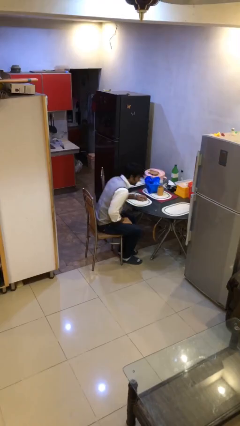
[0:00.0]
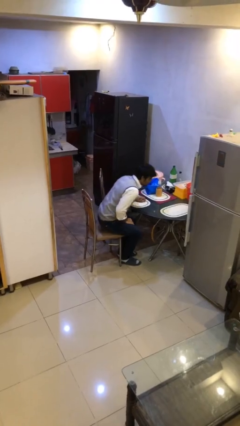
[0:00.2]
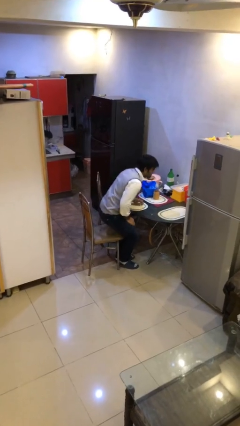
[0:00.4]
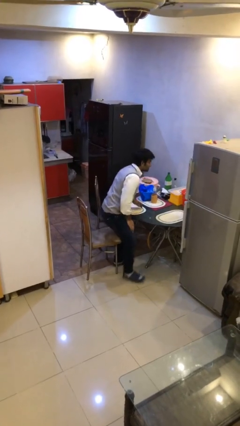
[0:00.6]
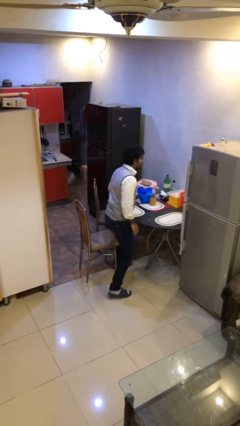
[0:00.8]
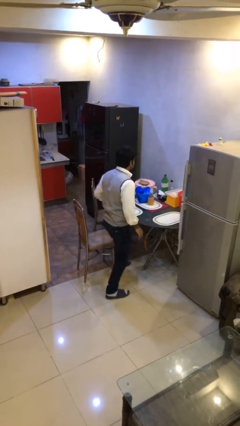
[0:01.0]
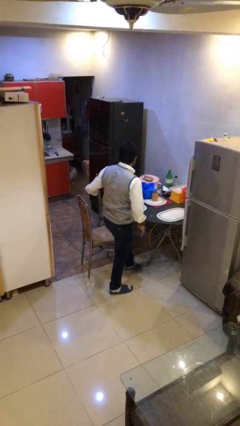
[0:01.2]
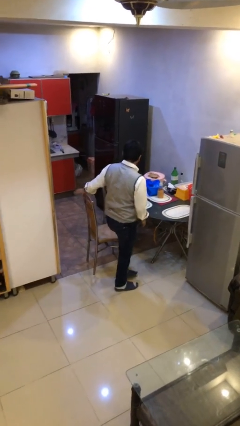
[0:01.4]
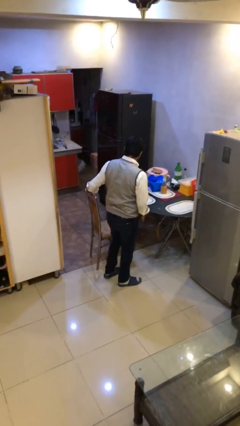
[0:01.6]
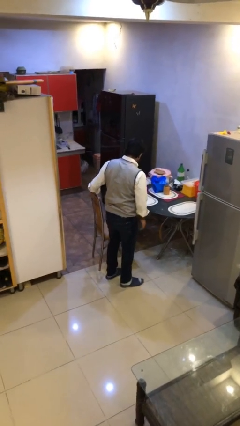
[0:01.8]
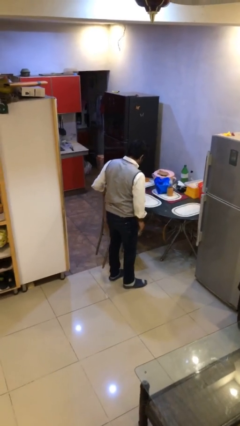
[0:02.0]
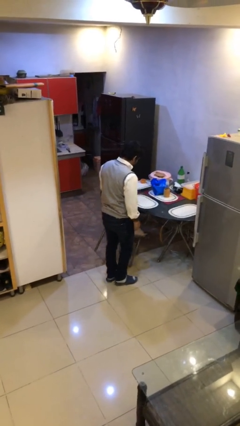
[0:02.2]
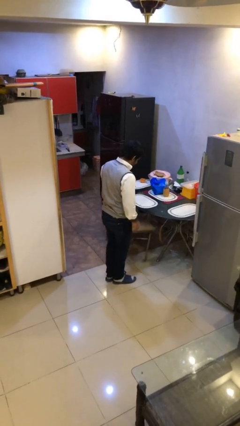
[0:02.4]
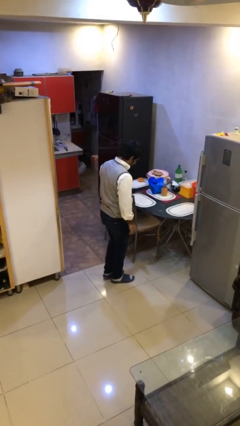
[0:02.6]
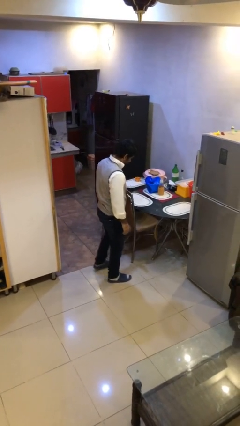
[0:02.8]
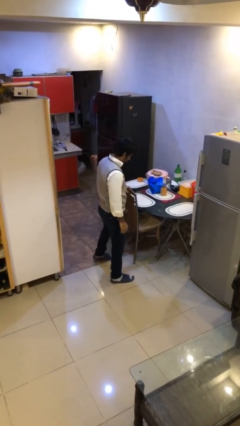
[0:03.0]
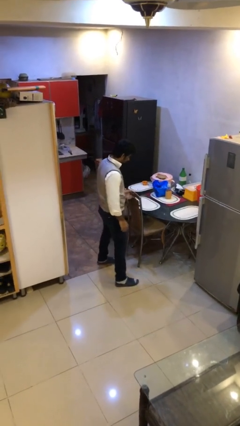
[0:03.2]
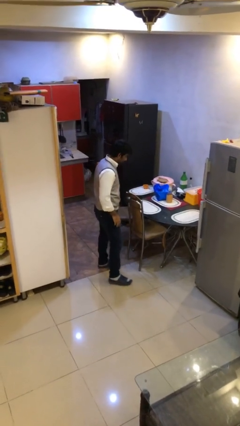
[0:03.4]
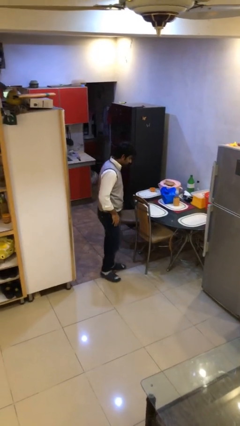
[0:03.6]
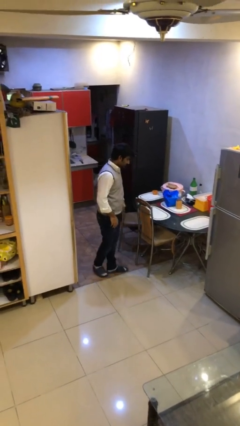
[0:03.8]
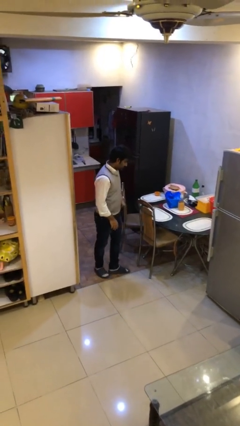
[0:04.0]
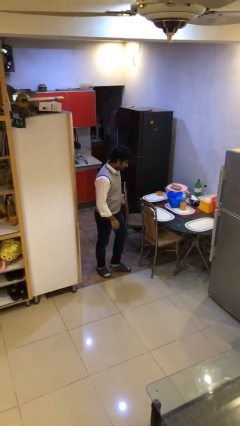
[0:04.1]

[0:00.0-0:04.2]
person stands up

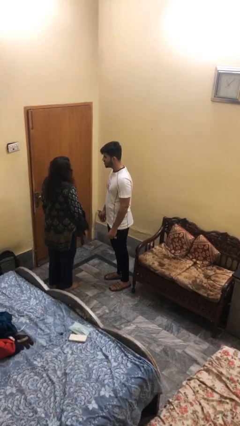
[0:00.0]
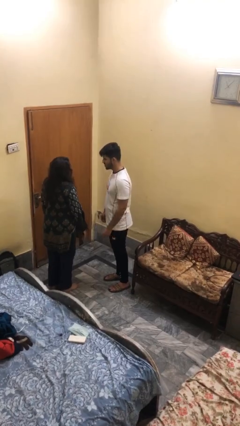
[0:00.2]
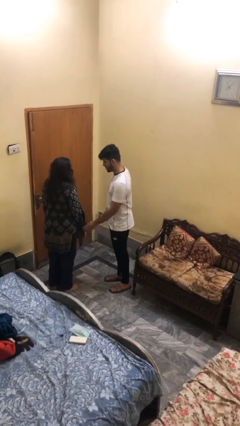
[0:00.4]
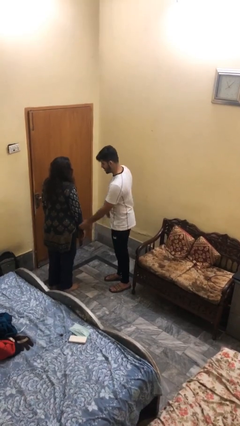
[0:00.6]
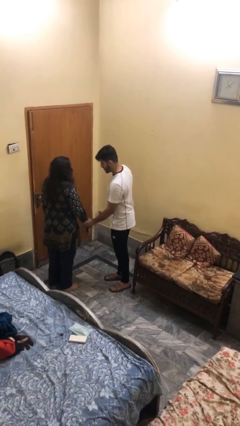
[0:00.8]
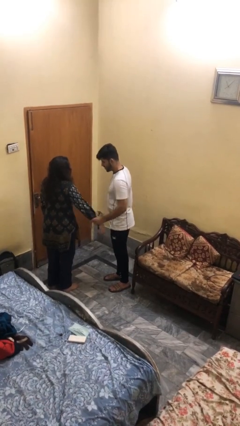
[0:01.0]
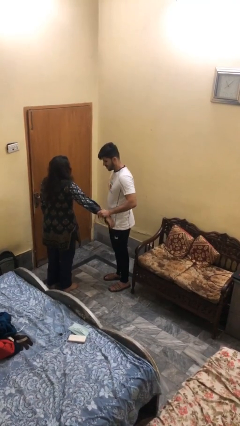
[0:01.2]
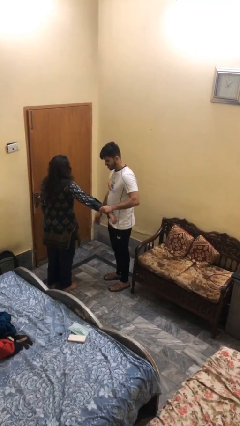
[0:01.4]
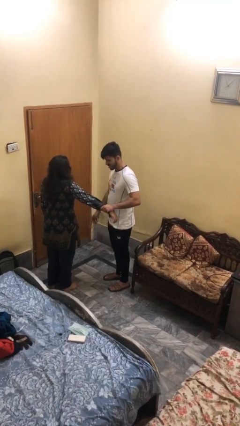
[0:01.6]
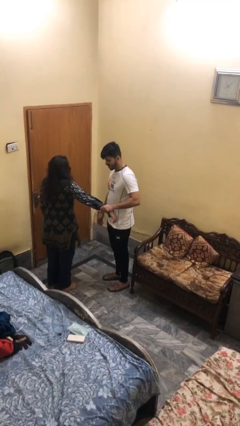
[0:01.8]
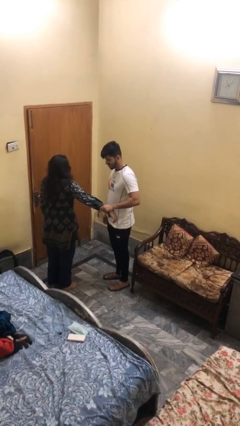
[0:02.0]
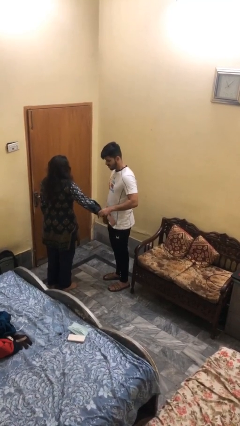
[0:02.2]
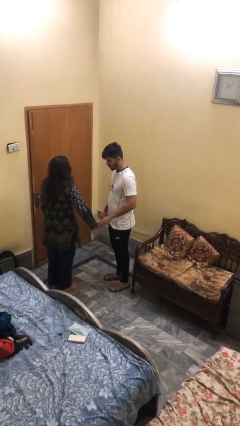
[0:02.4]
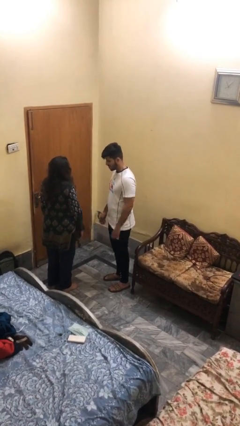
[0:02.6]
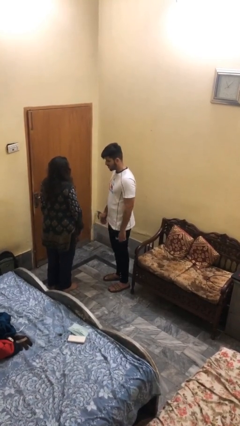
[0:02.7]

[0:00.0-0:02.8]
person grabs person by forearm

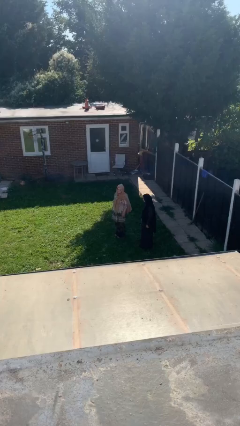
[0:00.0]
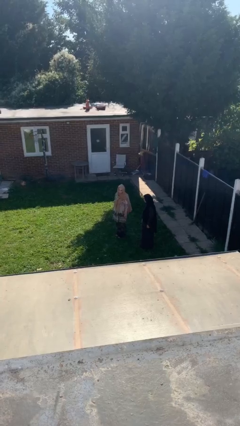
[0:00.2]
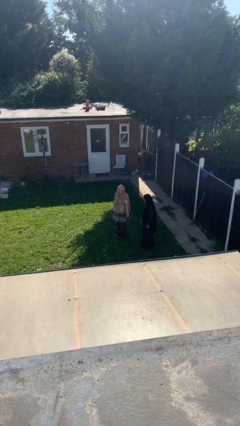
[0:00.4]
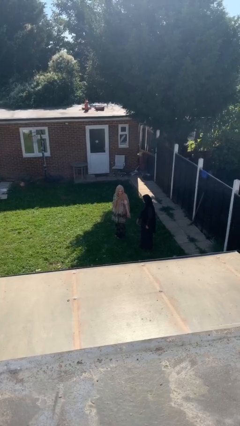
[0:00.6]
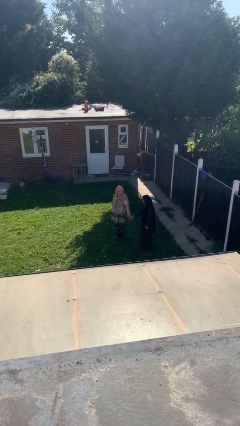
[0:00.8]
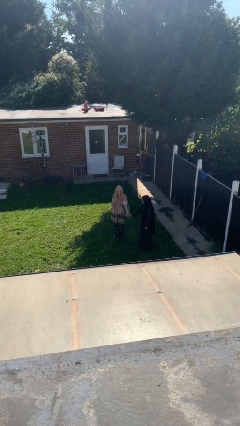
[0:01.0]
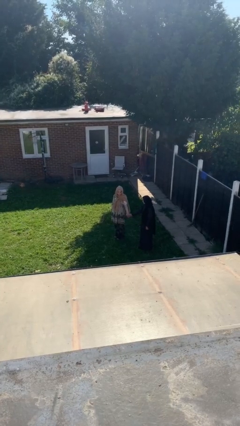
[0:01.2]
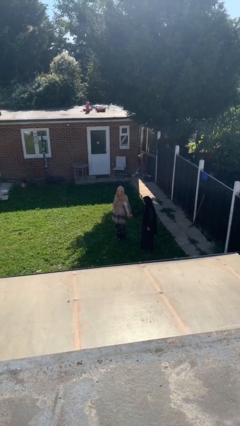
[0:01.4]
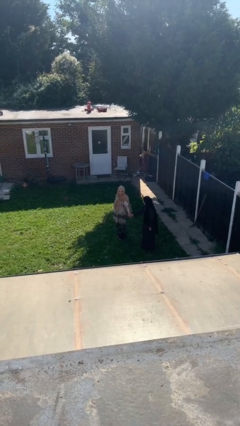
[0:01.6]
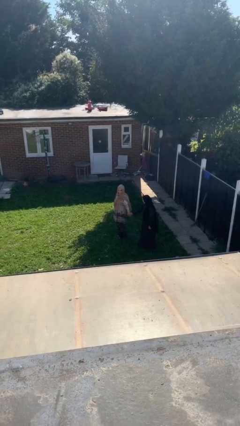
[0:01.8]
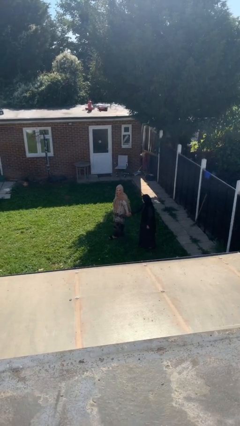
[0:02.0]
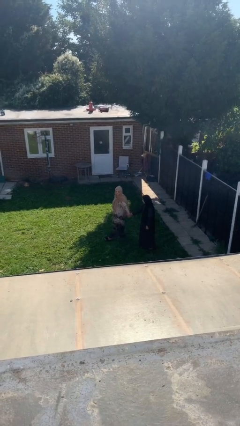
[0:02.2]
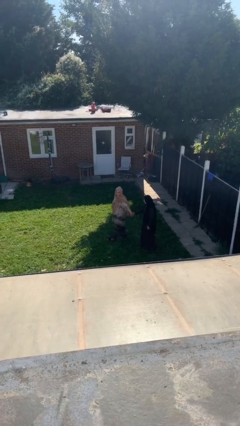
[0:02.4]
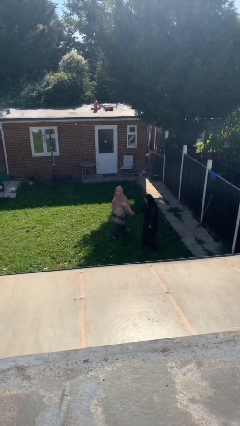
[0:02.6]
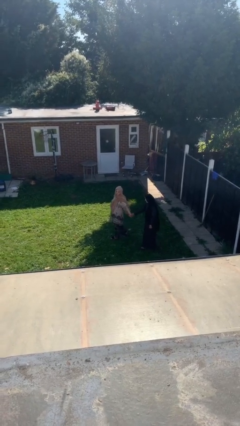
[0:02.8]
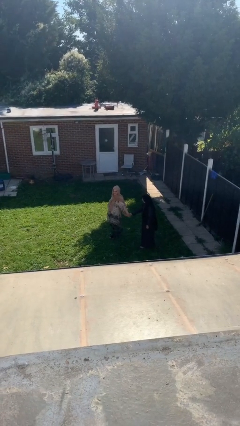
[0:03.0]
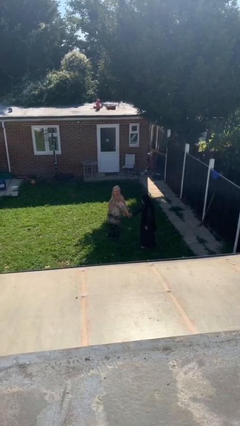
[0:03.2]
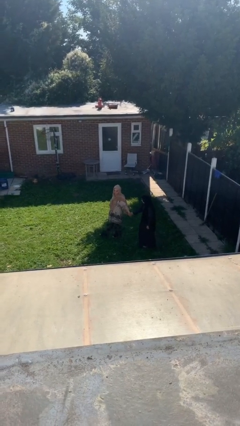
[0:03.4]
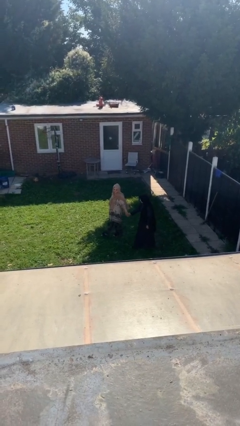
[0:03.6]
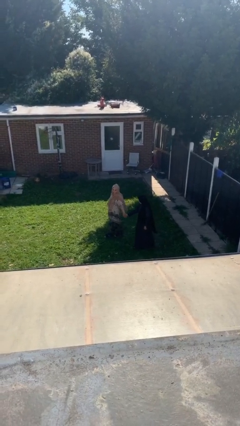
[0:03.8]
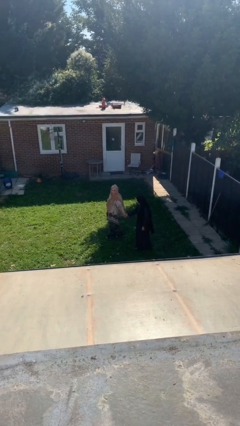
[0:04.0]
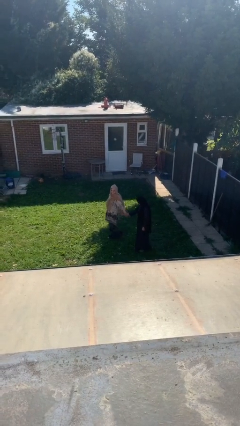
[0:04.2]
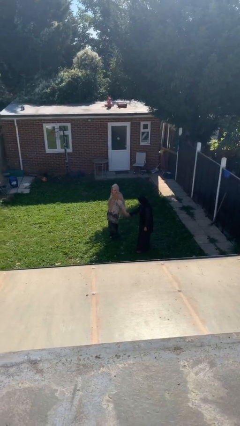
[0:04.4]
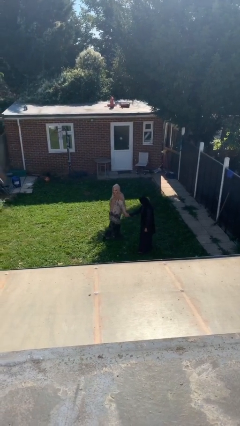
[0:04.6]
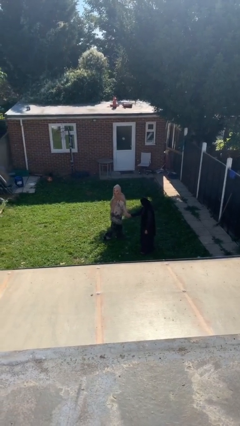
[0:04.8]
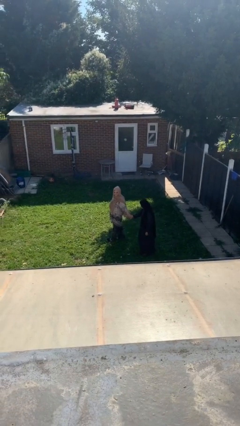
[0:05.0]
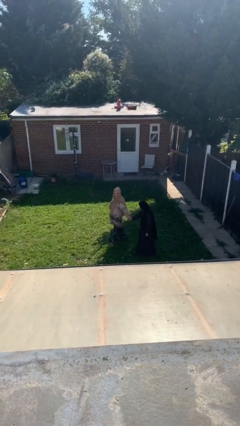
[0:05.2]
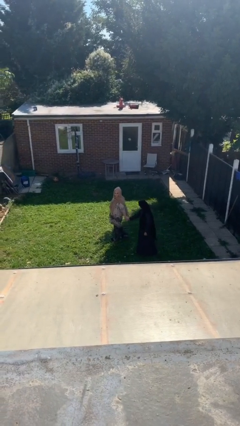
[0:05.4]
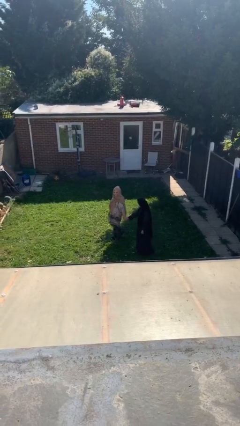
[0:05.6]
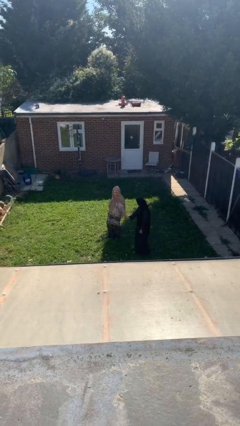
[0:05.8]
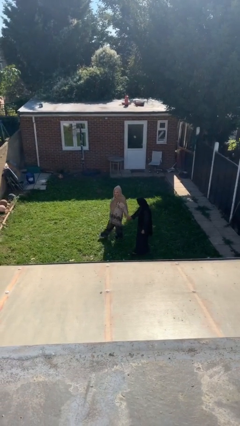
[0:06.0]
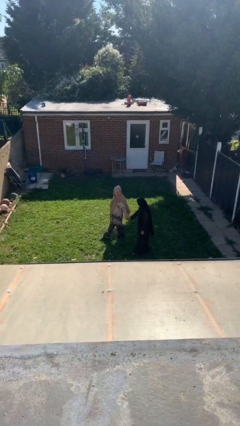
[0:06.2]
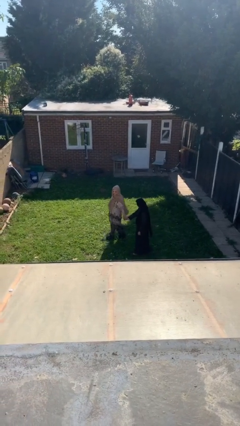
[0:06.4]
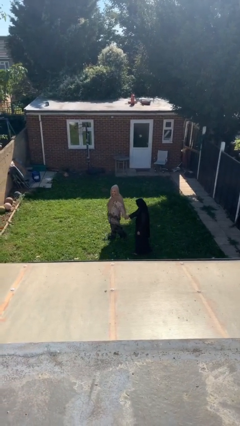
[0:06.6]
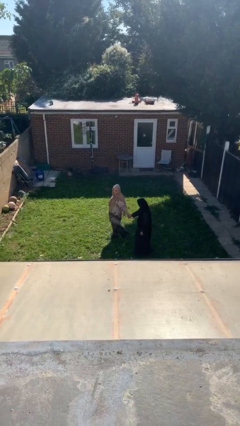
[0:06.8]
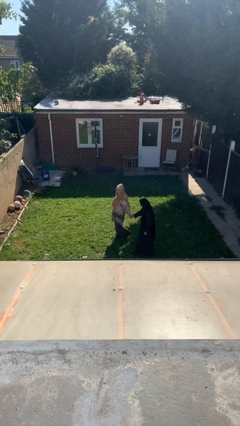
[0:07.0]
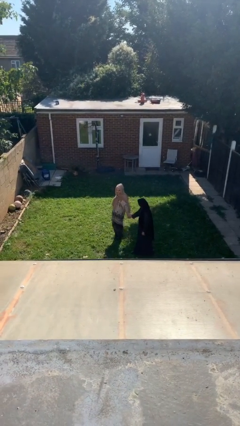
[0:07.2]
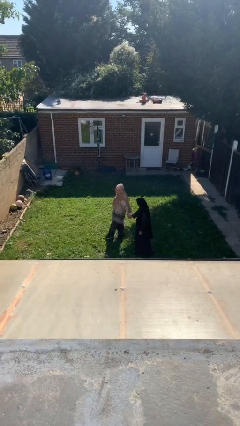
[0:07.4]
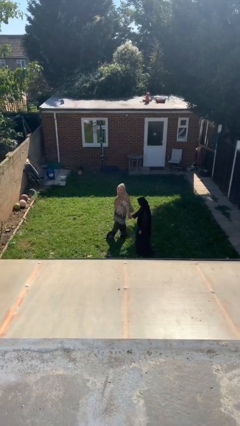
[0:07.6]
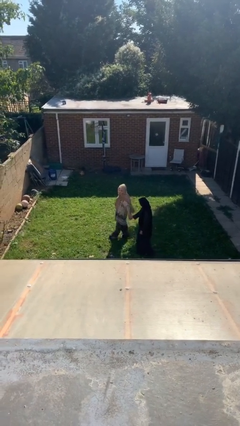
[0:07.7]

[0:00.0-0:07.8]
person holds hand

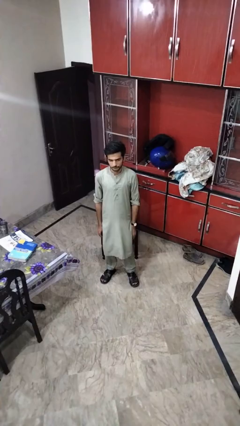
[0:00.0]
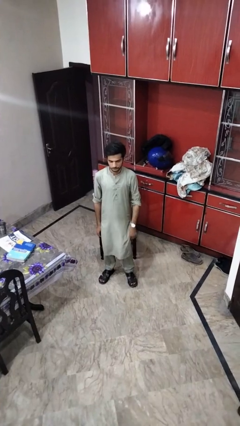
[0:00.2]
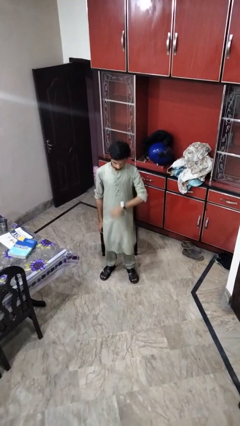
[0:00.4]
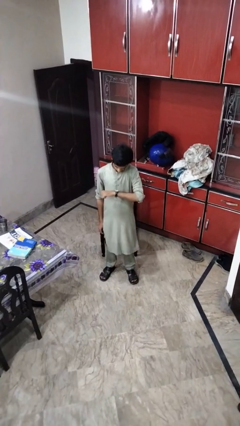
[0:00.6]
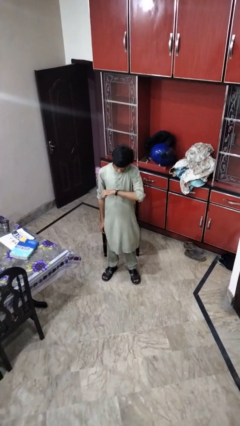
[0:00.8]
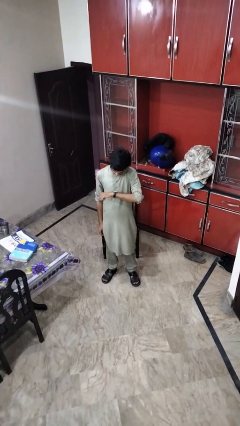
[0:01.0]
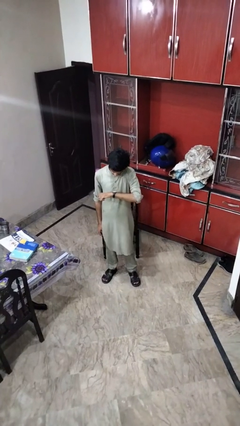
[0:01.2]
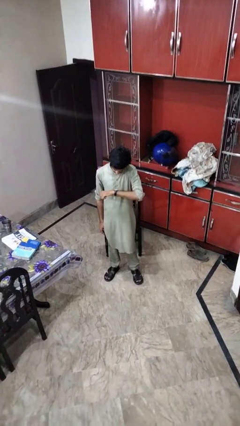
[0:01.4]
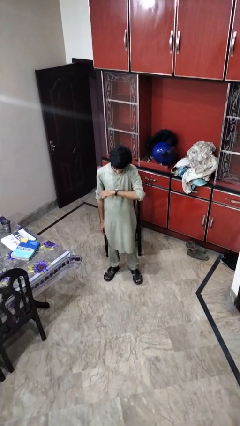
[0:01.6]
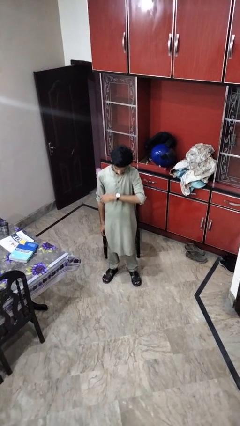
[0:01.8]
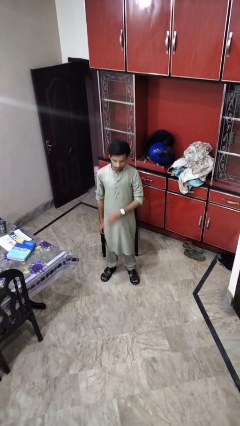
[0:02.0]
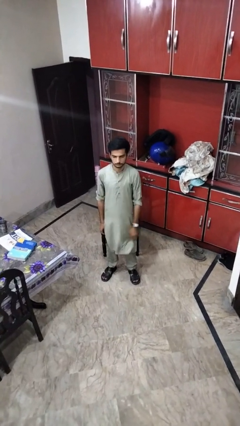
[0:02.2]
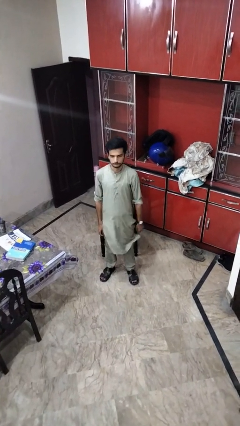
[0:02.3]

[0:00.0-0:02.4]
person looks at wristwatch

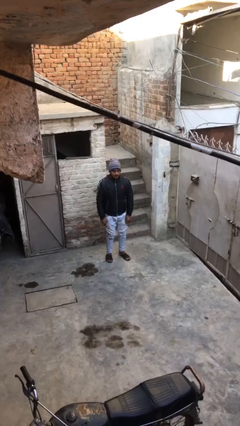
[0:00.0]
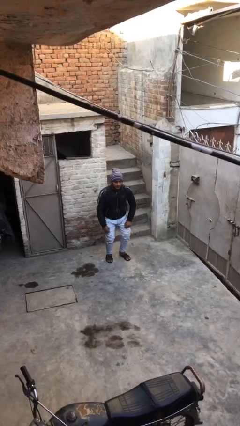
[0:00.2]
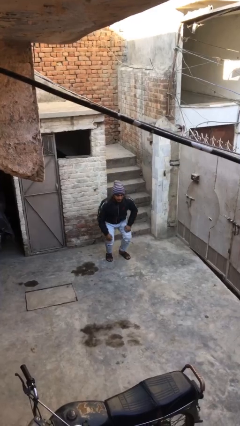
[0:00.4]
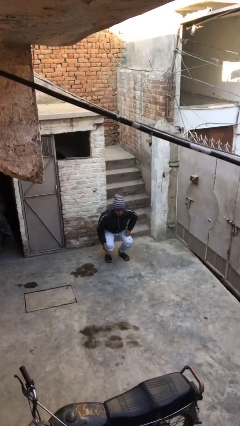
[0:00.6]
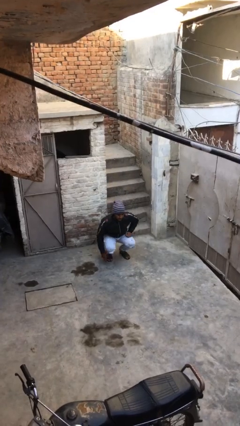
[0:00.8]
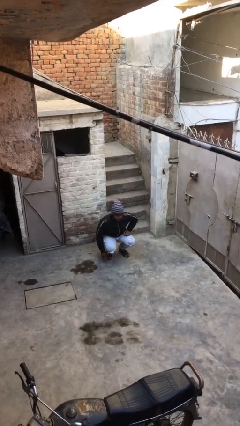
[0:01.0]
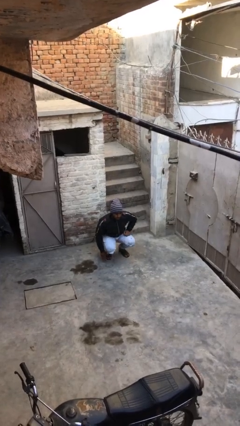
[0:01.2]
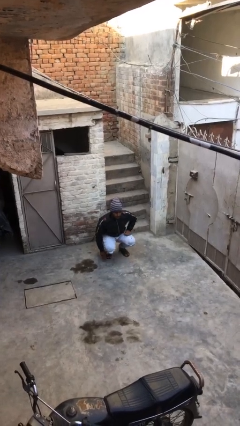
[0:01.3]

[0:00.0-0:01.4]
person sits down
